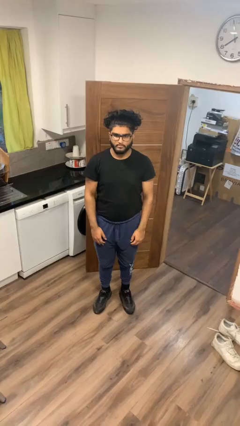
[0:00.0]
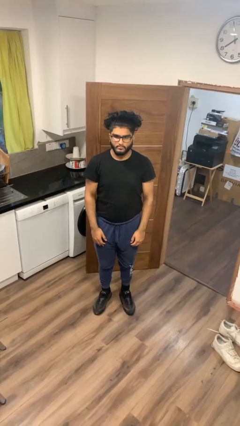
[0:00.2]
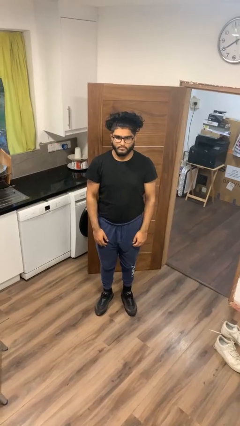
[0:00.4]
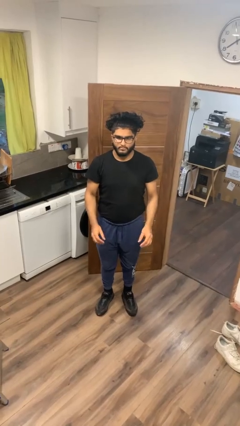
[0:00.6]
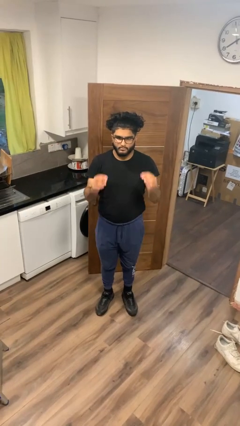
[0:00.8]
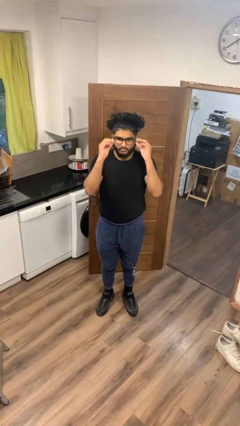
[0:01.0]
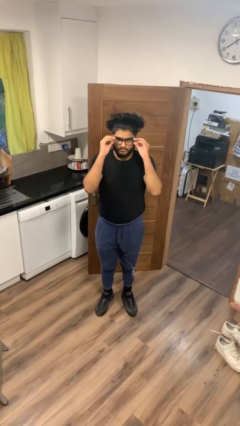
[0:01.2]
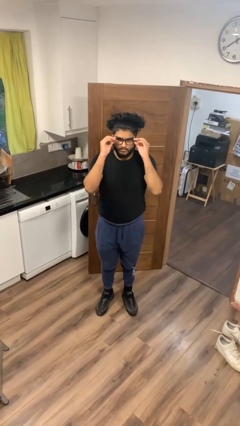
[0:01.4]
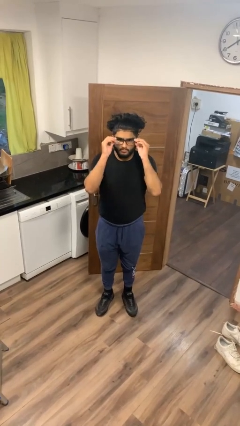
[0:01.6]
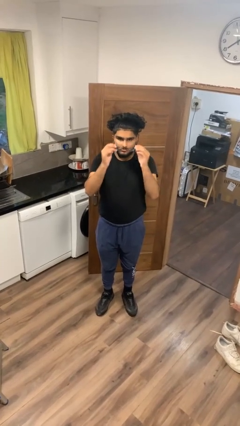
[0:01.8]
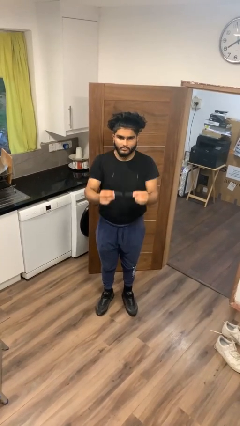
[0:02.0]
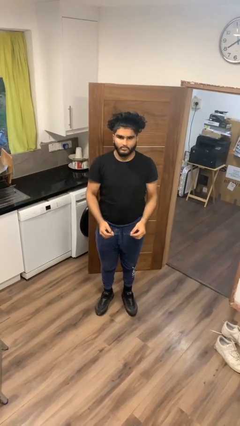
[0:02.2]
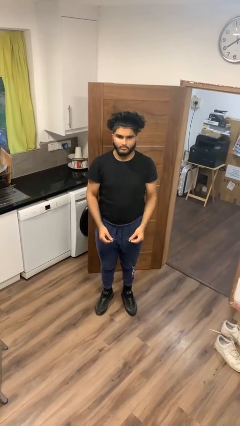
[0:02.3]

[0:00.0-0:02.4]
person takes off glasses

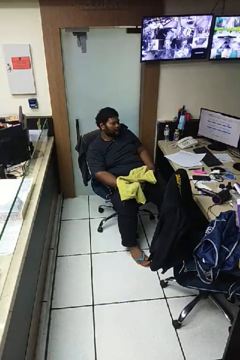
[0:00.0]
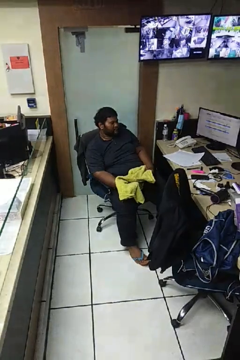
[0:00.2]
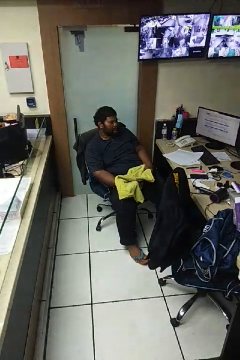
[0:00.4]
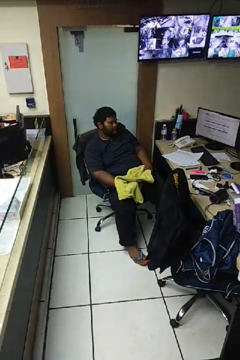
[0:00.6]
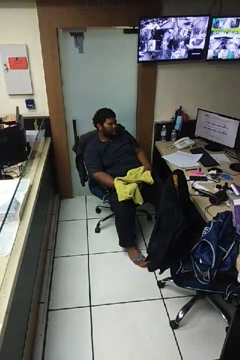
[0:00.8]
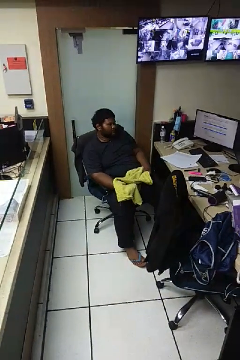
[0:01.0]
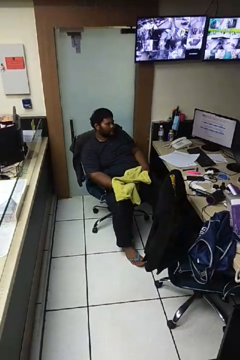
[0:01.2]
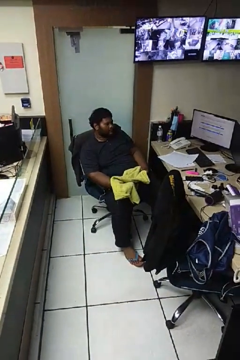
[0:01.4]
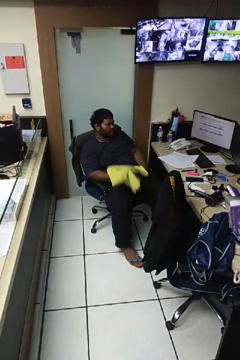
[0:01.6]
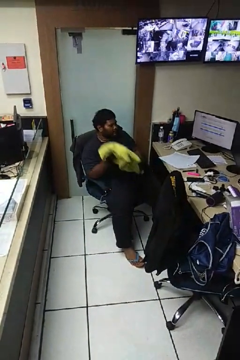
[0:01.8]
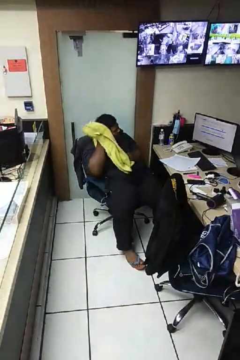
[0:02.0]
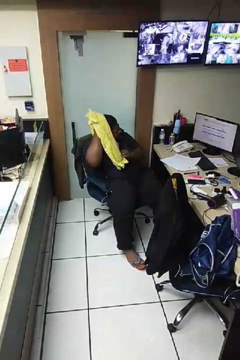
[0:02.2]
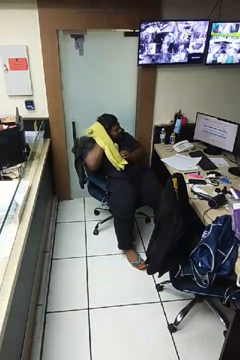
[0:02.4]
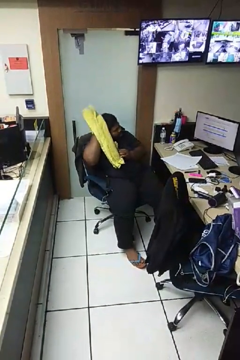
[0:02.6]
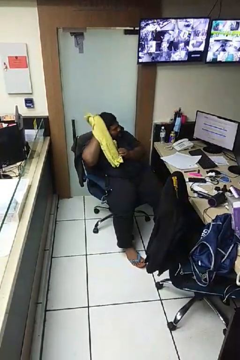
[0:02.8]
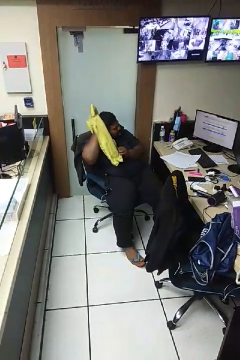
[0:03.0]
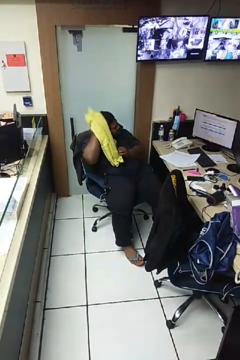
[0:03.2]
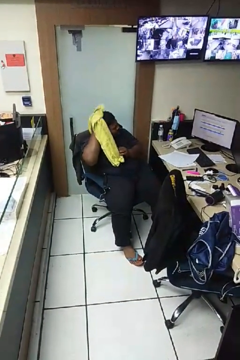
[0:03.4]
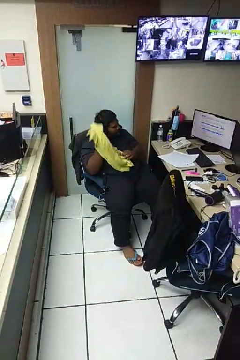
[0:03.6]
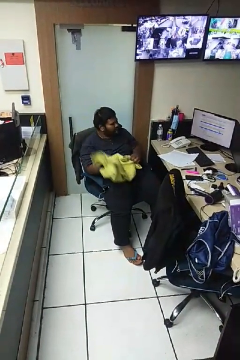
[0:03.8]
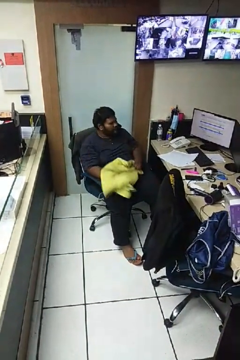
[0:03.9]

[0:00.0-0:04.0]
person dries hair with towel

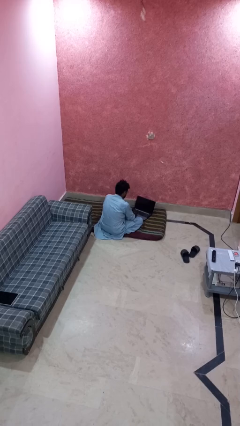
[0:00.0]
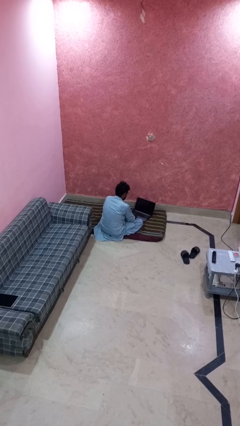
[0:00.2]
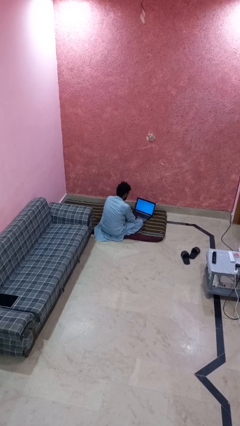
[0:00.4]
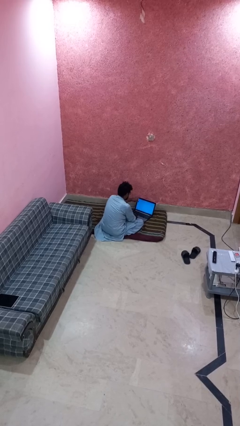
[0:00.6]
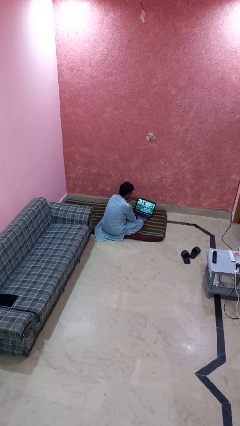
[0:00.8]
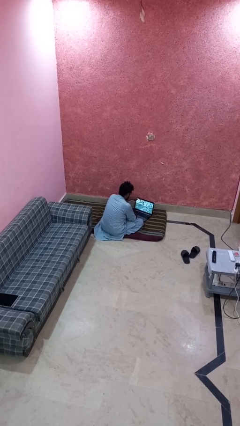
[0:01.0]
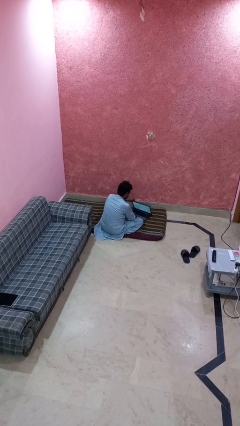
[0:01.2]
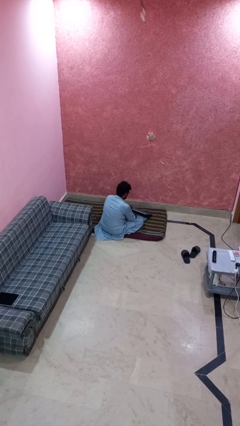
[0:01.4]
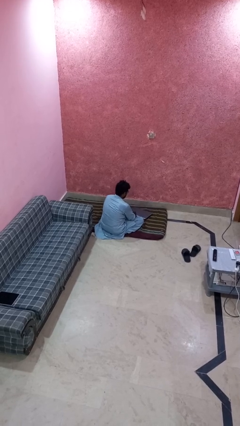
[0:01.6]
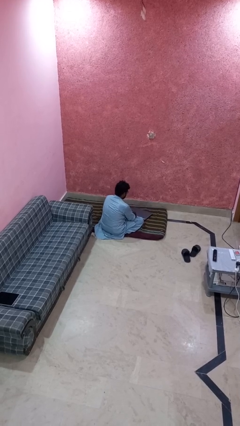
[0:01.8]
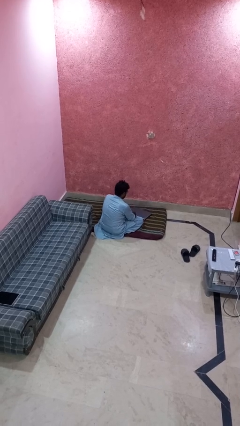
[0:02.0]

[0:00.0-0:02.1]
person closes laptop

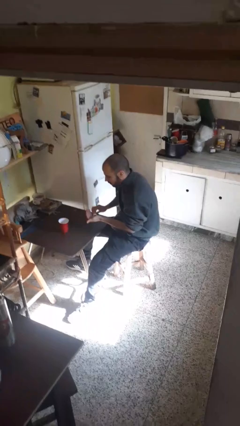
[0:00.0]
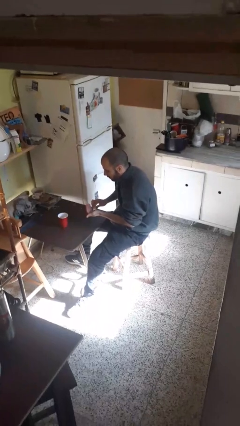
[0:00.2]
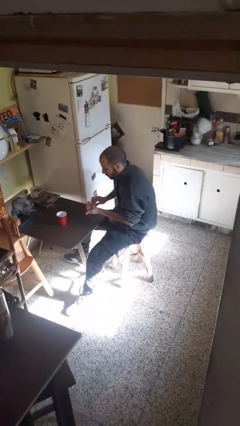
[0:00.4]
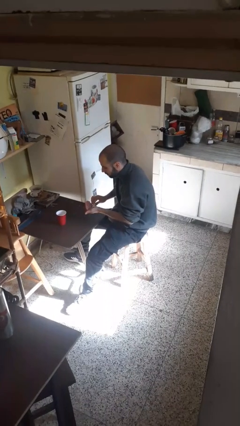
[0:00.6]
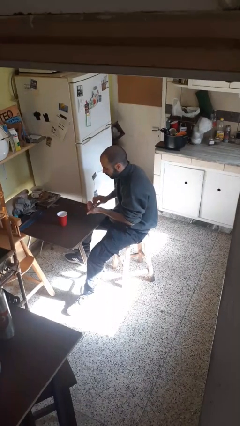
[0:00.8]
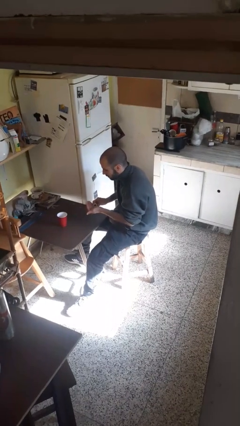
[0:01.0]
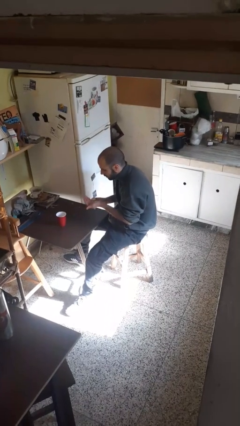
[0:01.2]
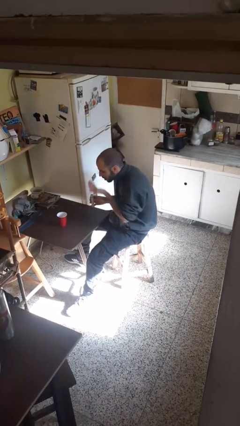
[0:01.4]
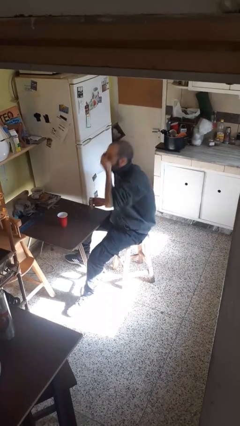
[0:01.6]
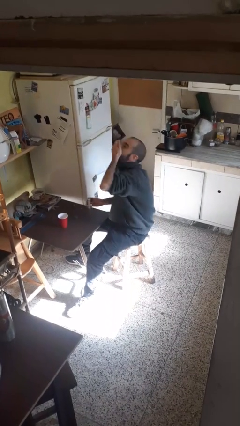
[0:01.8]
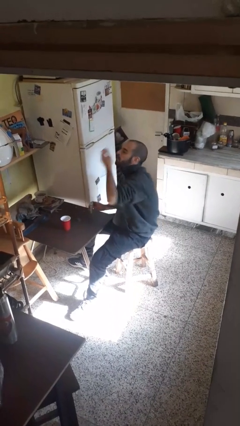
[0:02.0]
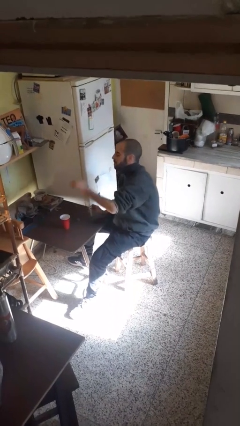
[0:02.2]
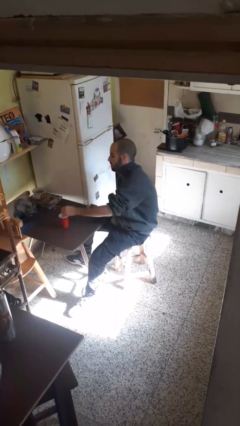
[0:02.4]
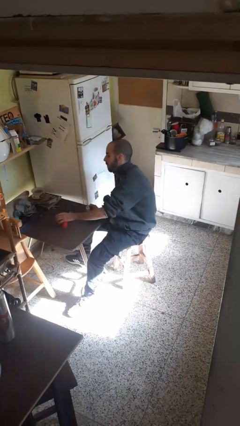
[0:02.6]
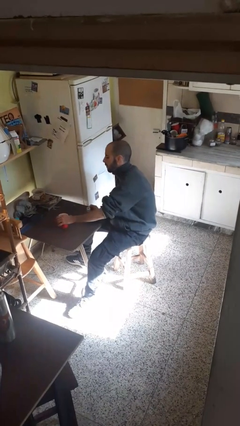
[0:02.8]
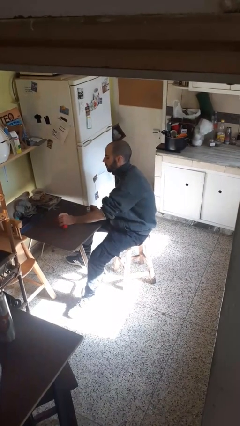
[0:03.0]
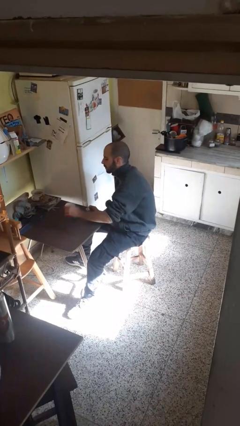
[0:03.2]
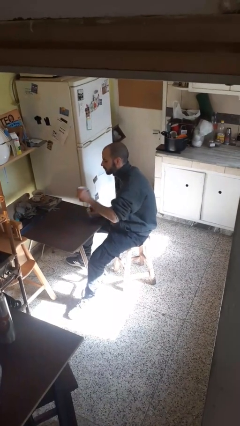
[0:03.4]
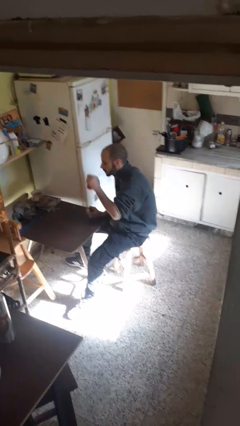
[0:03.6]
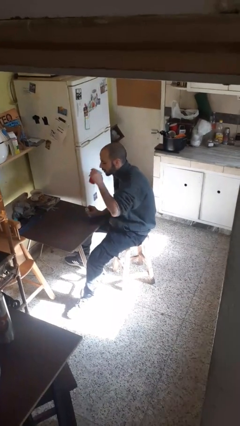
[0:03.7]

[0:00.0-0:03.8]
person takes medicine pills

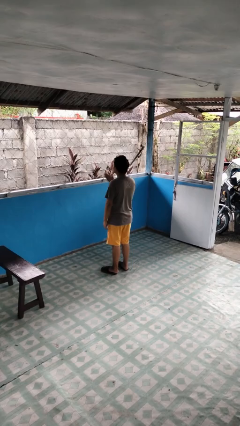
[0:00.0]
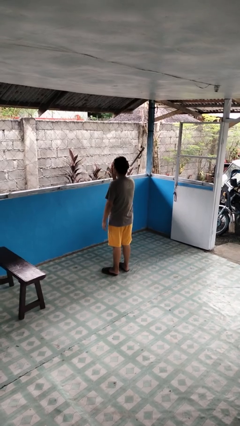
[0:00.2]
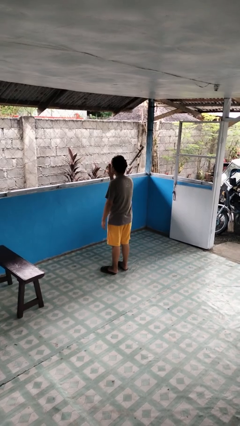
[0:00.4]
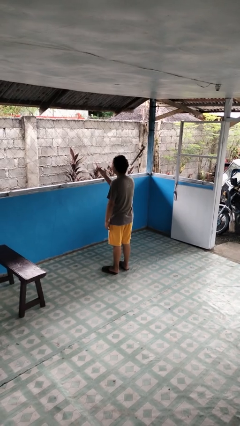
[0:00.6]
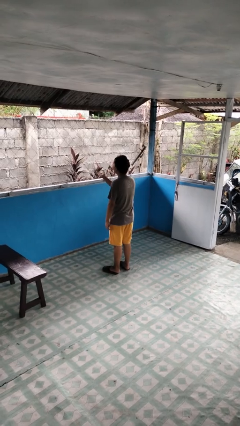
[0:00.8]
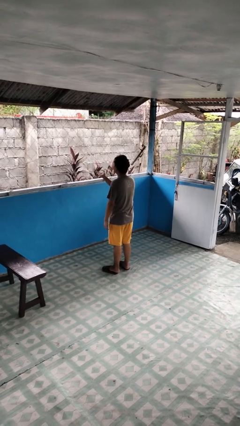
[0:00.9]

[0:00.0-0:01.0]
person gestures blow kiss

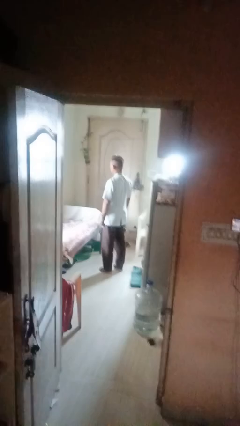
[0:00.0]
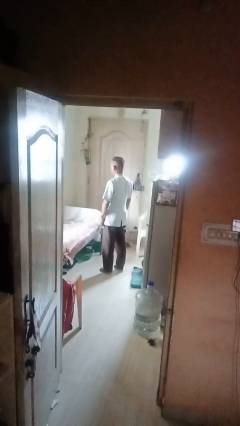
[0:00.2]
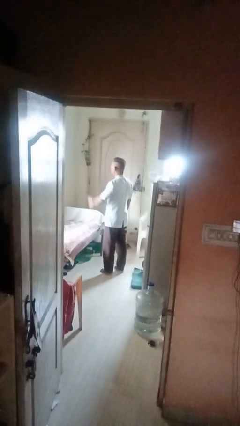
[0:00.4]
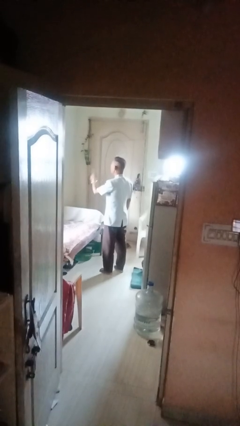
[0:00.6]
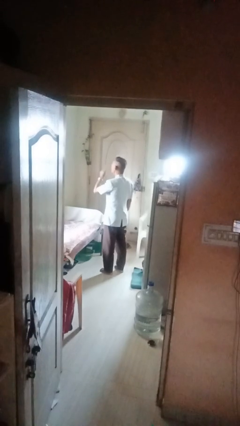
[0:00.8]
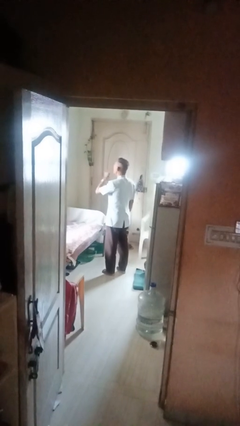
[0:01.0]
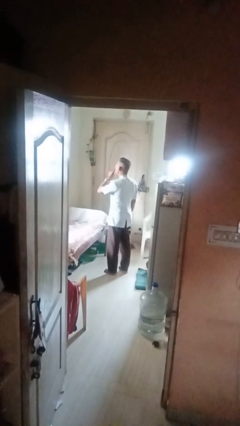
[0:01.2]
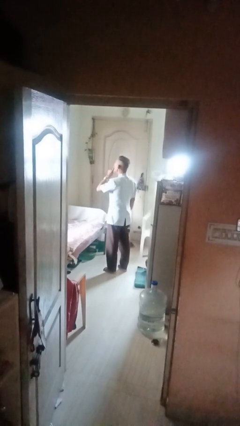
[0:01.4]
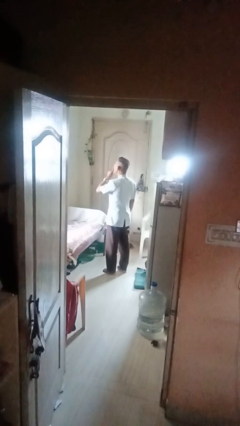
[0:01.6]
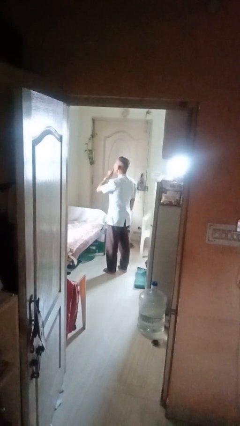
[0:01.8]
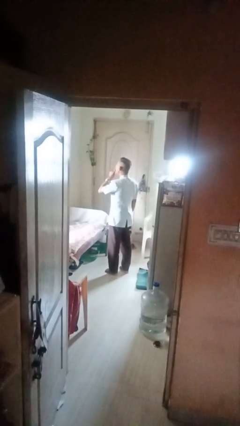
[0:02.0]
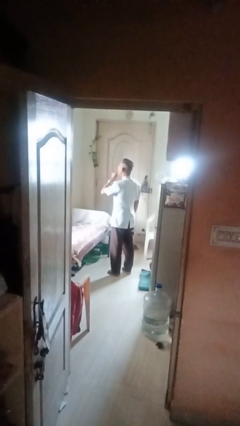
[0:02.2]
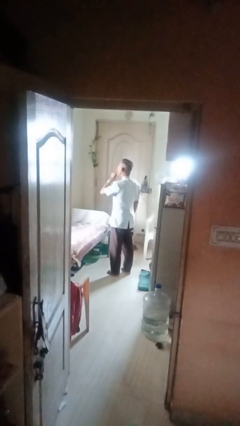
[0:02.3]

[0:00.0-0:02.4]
person gestures be quiet

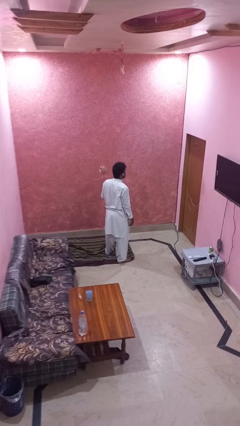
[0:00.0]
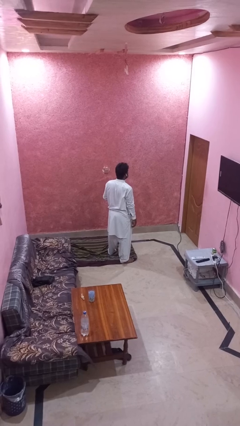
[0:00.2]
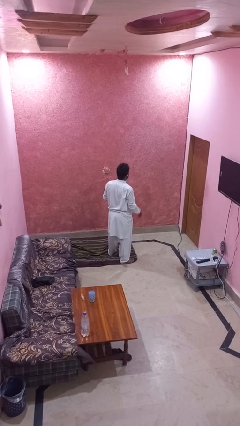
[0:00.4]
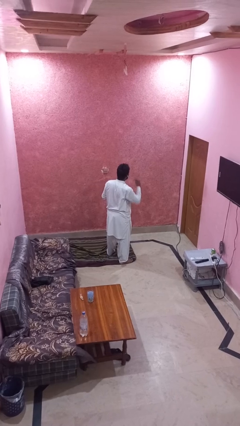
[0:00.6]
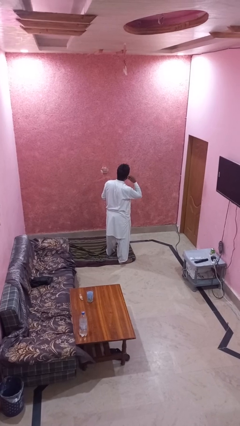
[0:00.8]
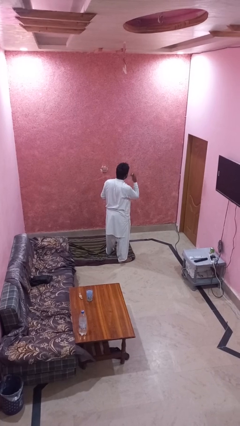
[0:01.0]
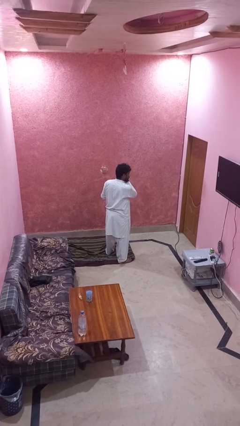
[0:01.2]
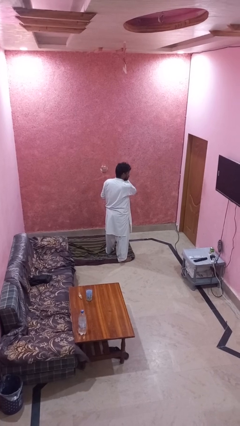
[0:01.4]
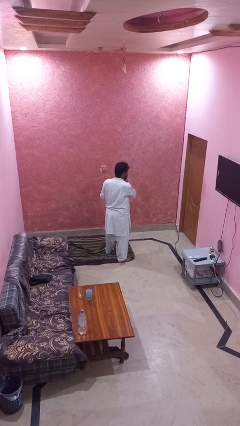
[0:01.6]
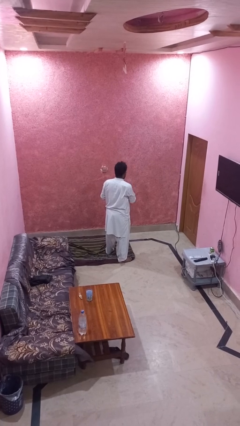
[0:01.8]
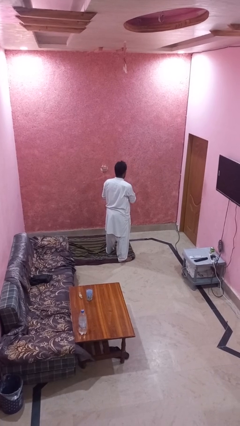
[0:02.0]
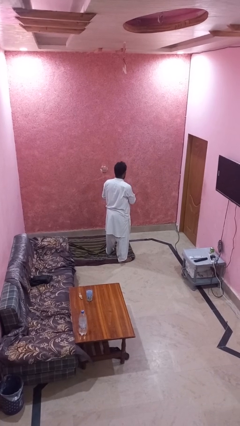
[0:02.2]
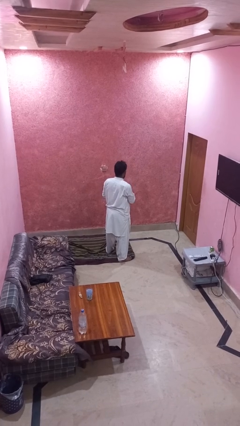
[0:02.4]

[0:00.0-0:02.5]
person takes off headphones
